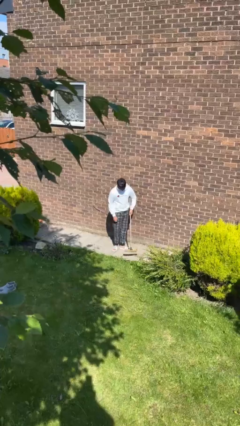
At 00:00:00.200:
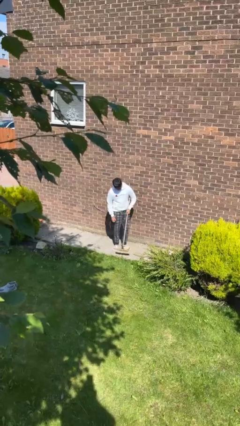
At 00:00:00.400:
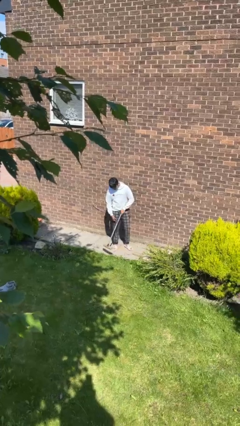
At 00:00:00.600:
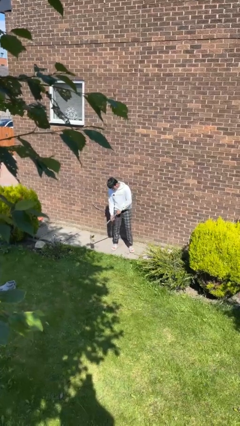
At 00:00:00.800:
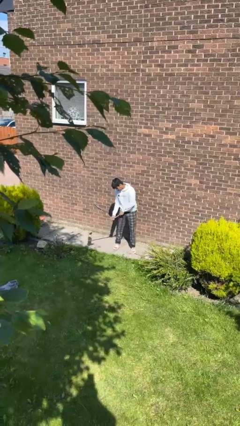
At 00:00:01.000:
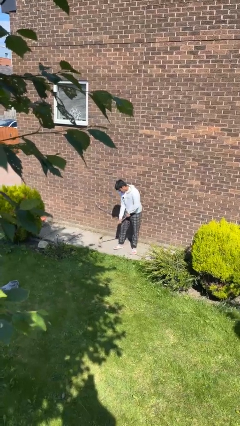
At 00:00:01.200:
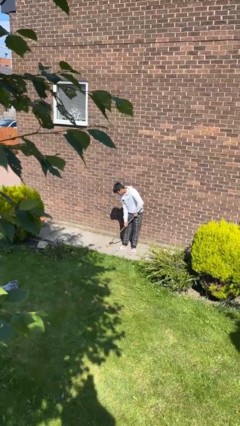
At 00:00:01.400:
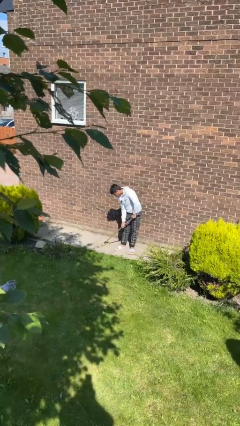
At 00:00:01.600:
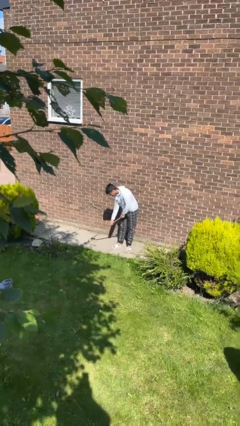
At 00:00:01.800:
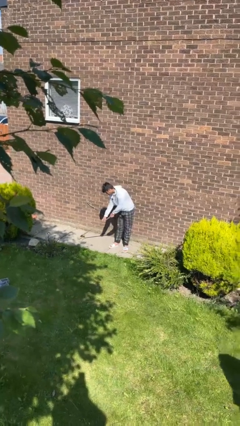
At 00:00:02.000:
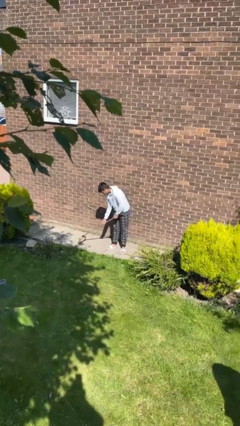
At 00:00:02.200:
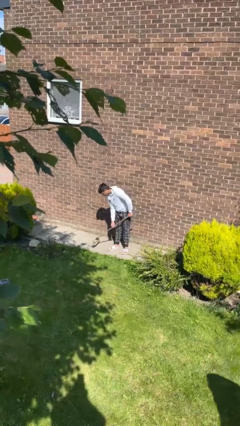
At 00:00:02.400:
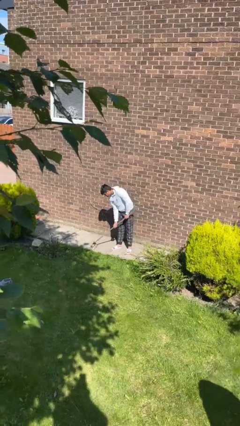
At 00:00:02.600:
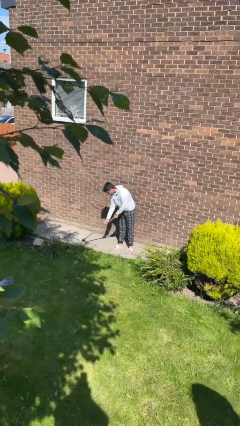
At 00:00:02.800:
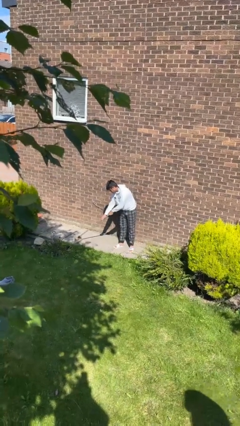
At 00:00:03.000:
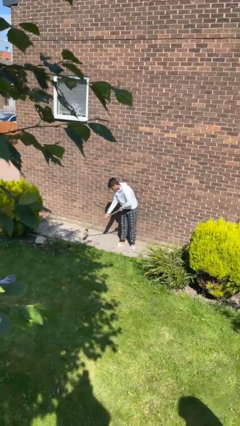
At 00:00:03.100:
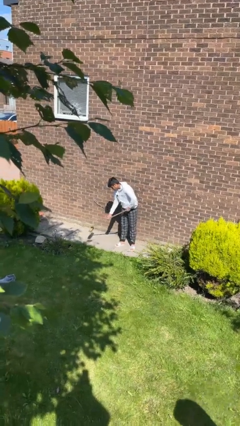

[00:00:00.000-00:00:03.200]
person sweeps floor

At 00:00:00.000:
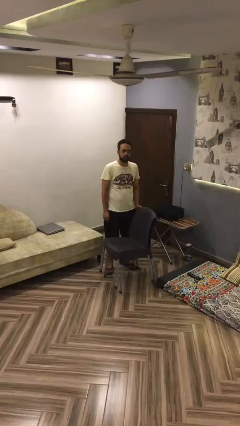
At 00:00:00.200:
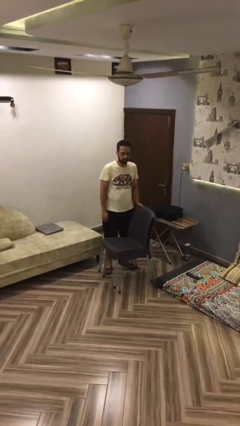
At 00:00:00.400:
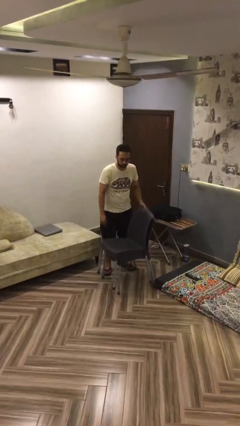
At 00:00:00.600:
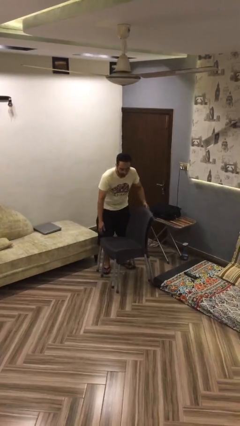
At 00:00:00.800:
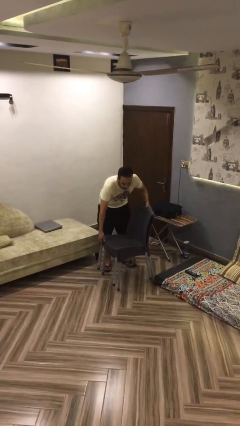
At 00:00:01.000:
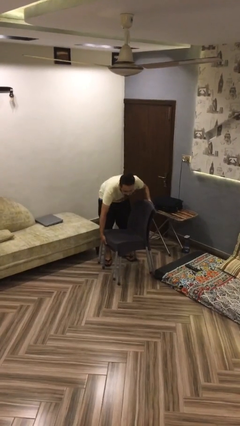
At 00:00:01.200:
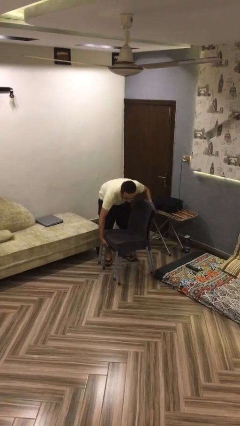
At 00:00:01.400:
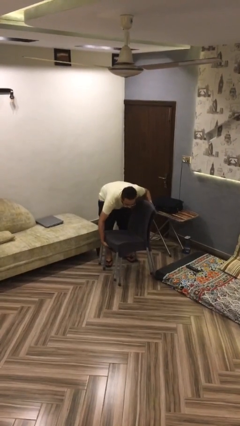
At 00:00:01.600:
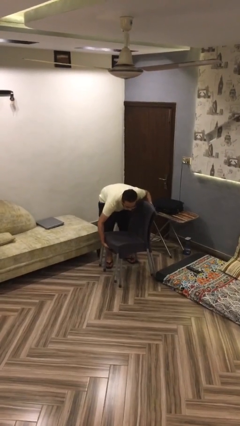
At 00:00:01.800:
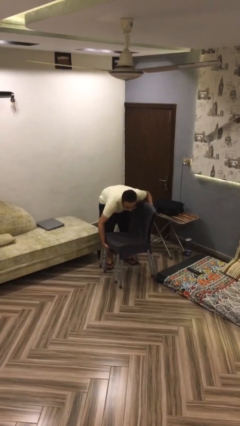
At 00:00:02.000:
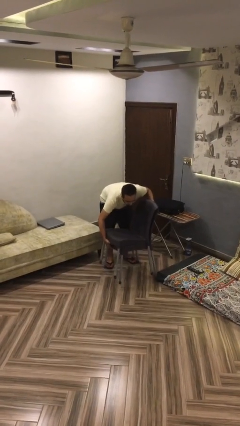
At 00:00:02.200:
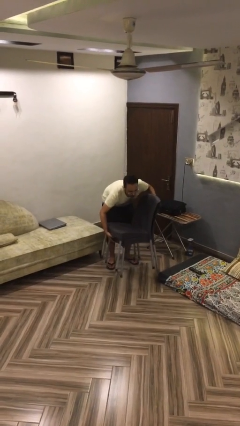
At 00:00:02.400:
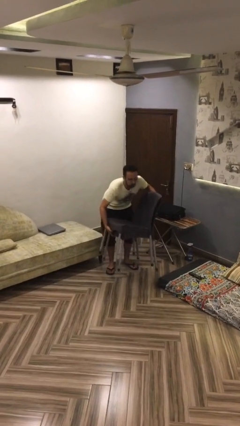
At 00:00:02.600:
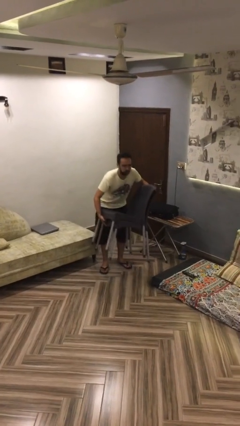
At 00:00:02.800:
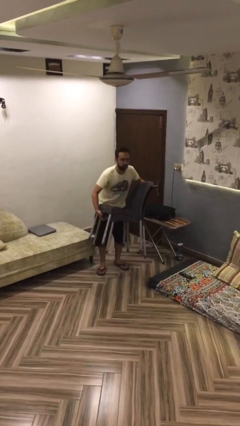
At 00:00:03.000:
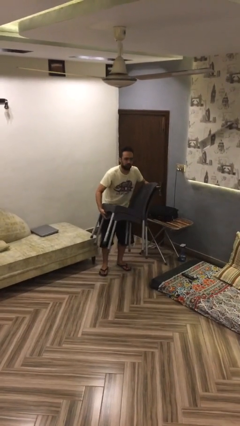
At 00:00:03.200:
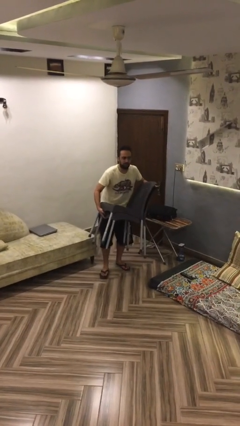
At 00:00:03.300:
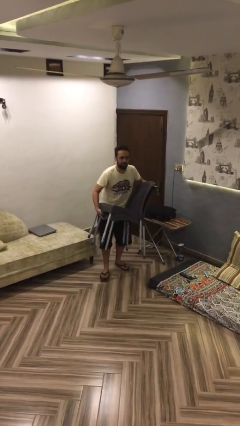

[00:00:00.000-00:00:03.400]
person picks up object from floor

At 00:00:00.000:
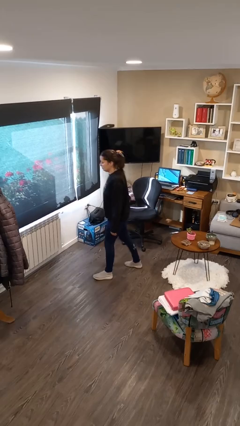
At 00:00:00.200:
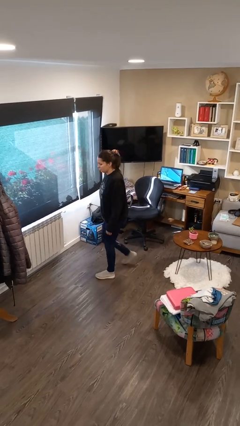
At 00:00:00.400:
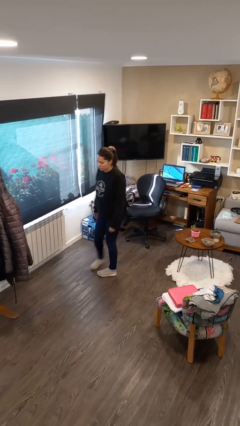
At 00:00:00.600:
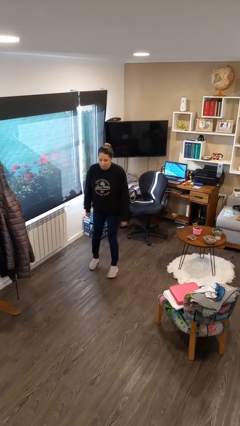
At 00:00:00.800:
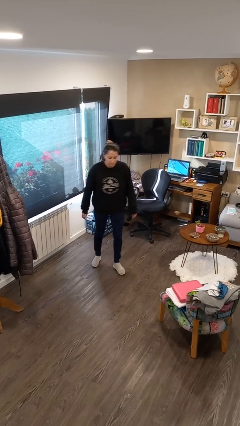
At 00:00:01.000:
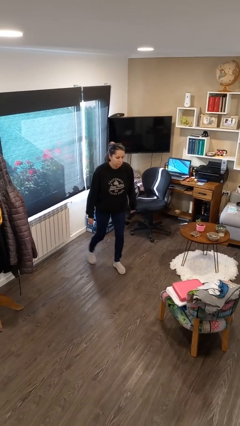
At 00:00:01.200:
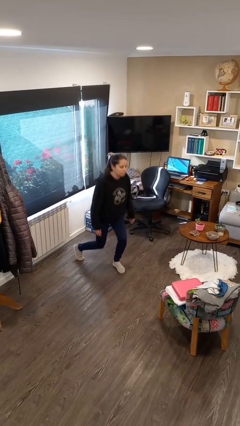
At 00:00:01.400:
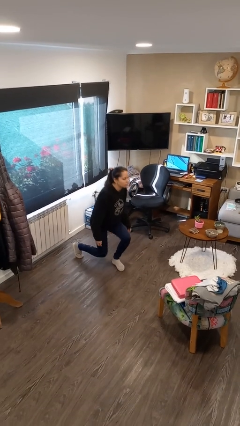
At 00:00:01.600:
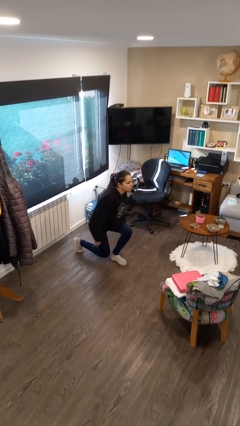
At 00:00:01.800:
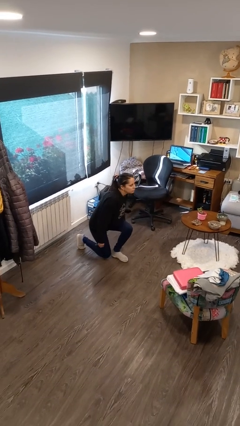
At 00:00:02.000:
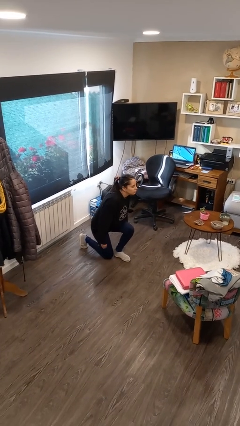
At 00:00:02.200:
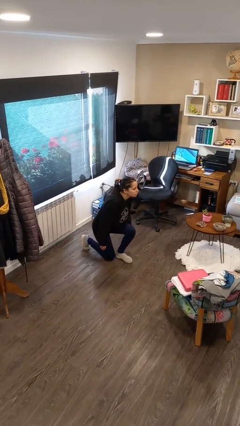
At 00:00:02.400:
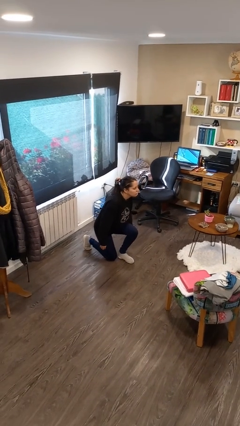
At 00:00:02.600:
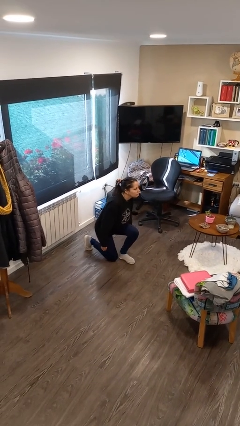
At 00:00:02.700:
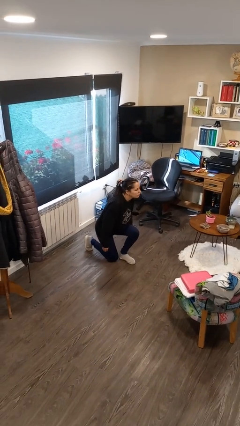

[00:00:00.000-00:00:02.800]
person kneels

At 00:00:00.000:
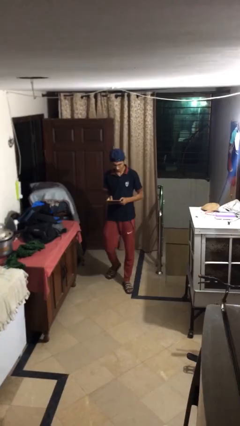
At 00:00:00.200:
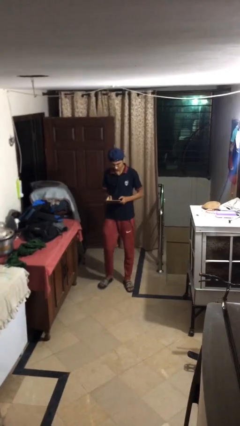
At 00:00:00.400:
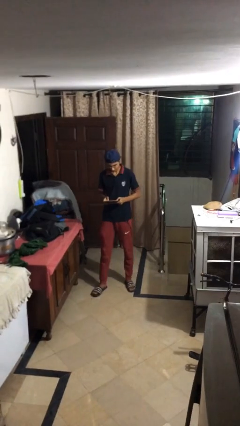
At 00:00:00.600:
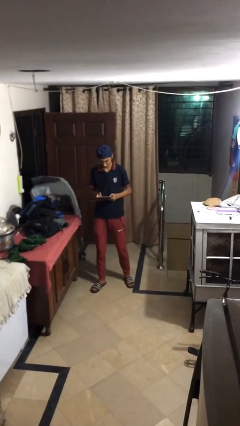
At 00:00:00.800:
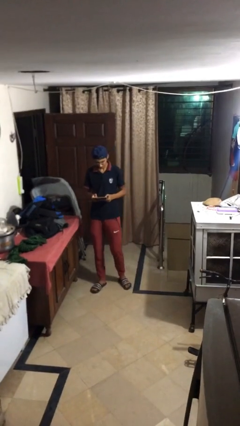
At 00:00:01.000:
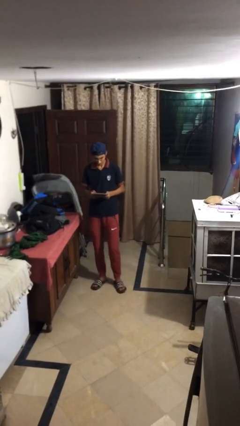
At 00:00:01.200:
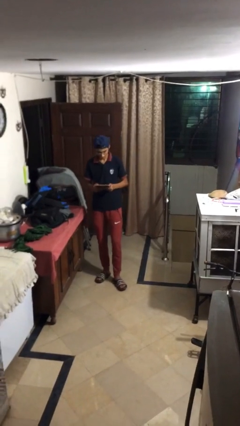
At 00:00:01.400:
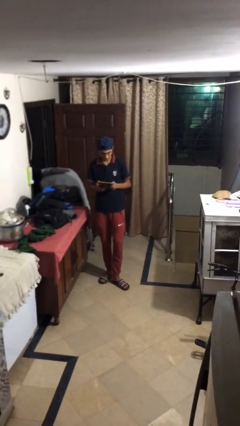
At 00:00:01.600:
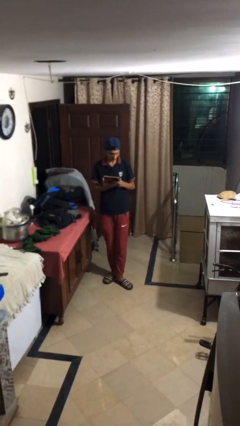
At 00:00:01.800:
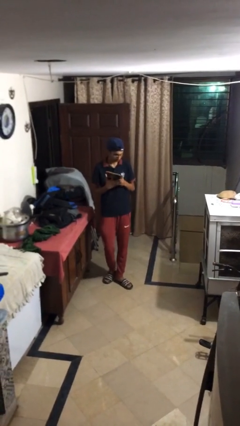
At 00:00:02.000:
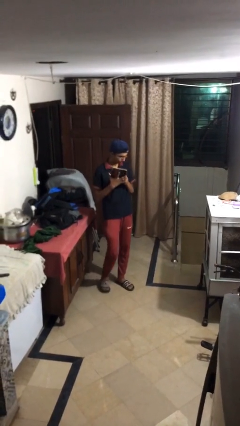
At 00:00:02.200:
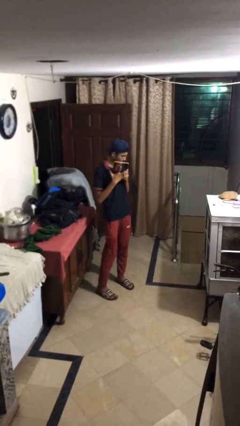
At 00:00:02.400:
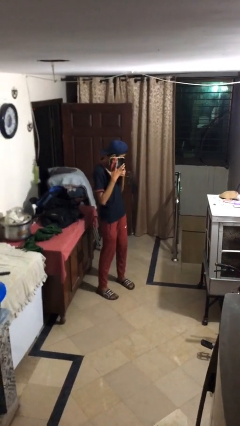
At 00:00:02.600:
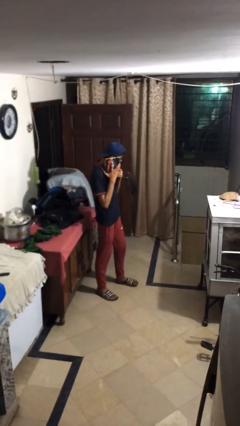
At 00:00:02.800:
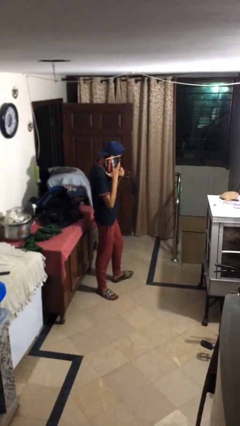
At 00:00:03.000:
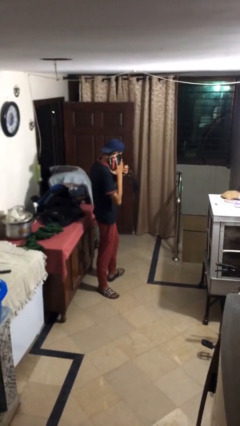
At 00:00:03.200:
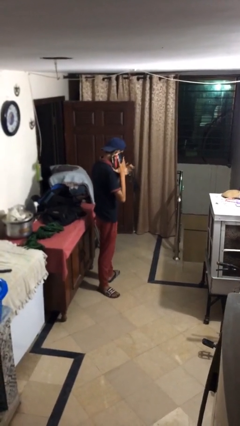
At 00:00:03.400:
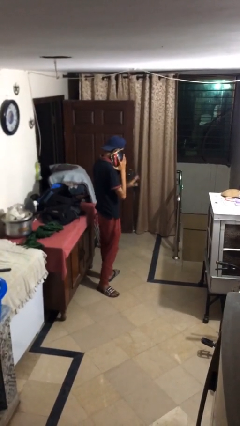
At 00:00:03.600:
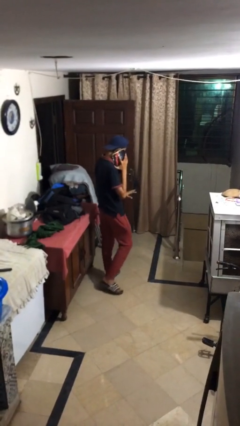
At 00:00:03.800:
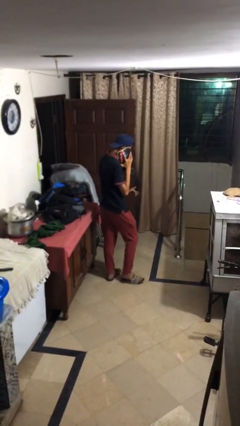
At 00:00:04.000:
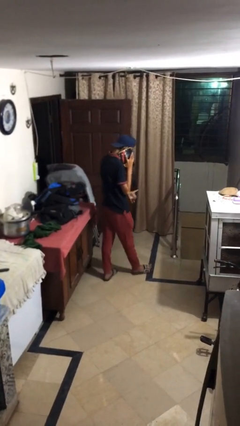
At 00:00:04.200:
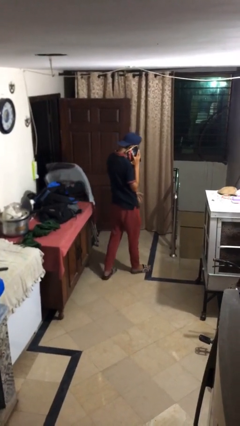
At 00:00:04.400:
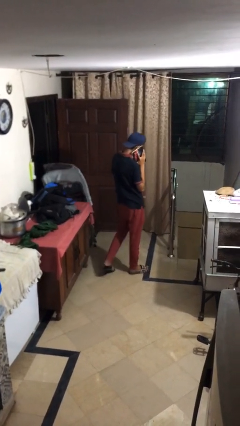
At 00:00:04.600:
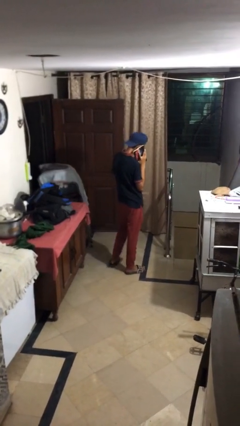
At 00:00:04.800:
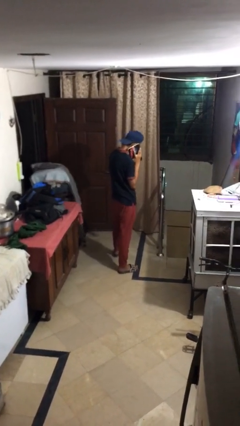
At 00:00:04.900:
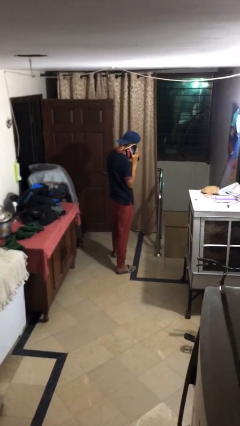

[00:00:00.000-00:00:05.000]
person talks on phone

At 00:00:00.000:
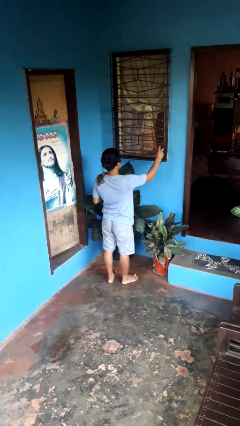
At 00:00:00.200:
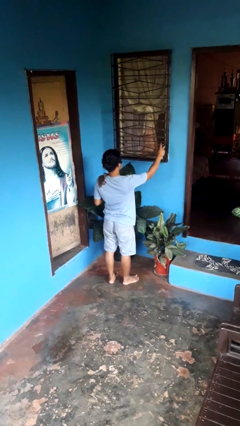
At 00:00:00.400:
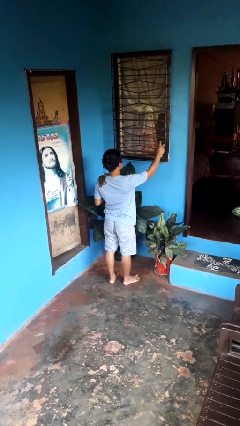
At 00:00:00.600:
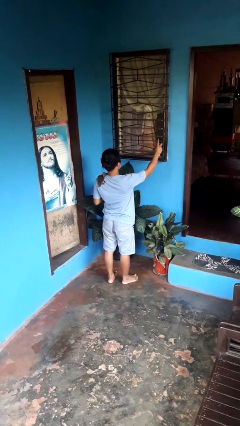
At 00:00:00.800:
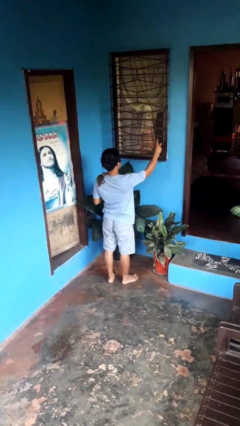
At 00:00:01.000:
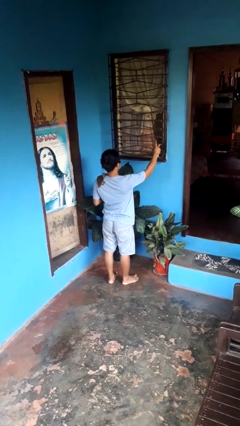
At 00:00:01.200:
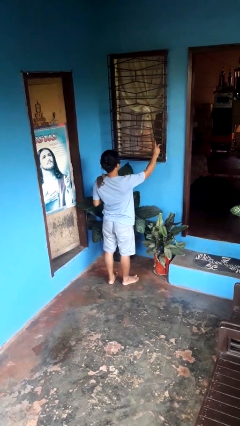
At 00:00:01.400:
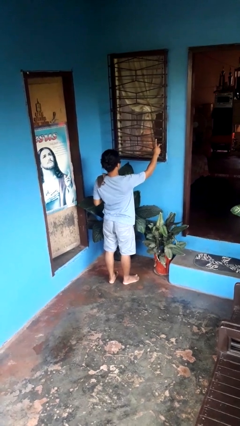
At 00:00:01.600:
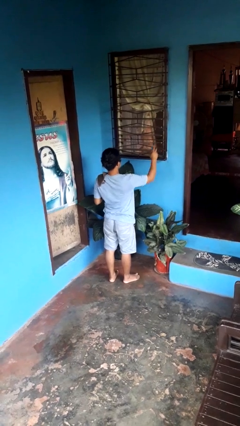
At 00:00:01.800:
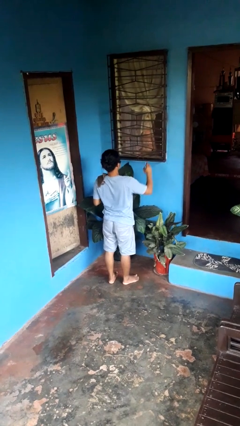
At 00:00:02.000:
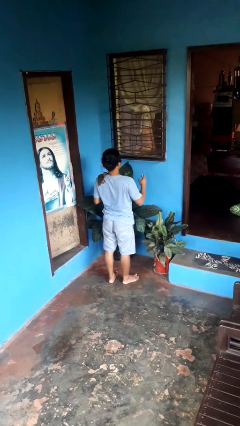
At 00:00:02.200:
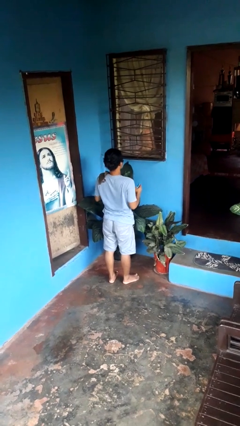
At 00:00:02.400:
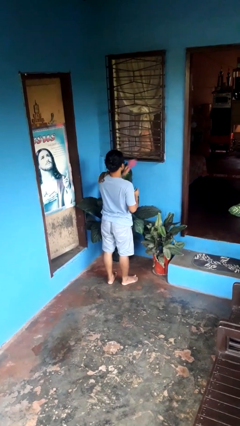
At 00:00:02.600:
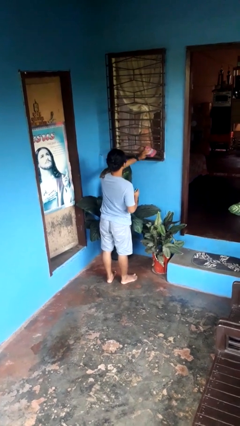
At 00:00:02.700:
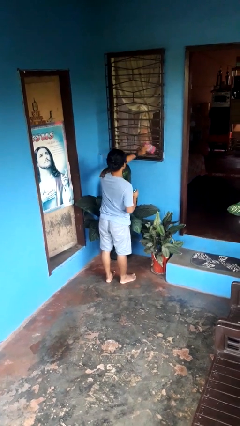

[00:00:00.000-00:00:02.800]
person sprays from bottle

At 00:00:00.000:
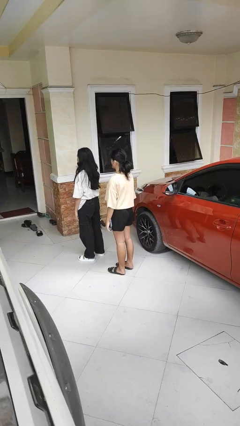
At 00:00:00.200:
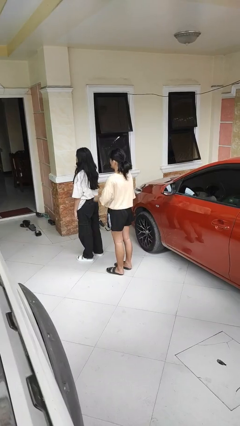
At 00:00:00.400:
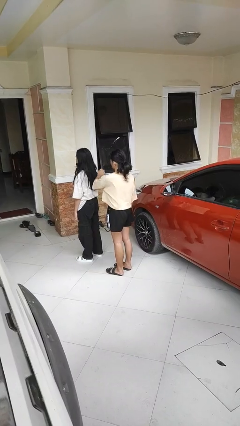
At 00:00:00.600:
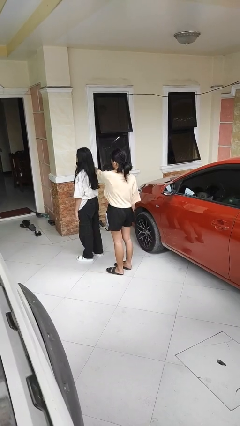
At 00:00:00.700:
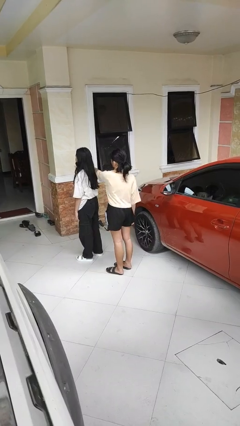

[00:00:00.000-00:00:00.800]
person grabs person by shoulder
